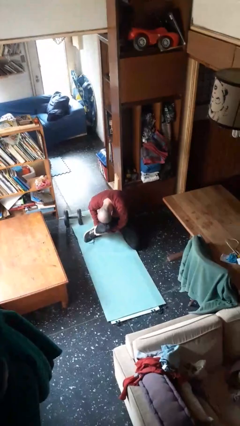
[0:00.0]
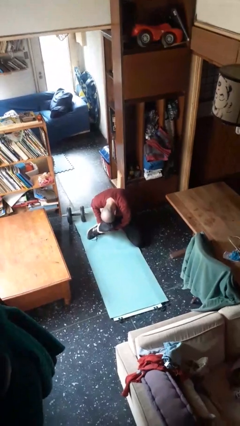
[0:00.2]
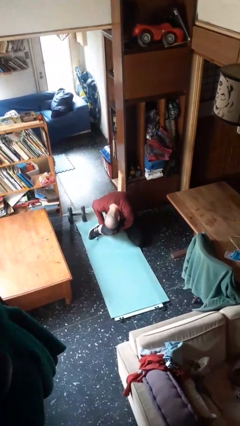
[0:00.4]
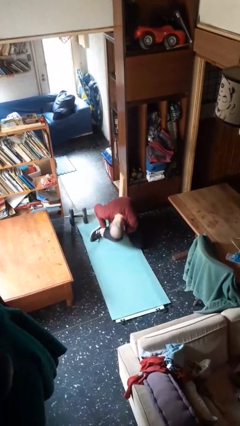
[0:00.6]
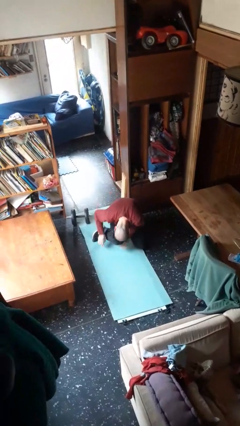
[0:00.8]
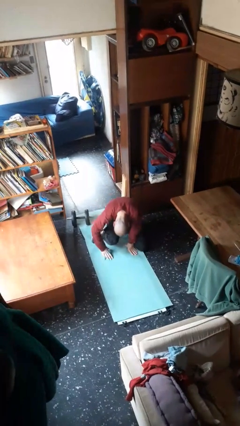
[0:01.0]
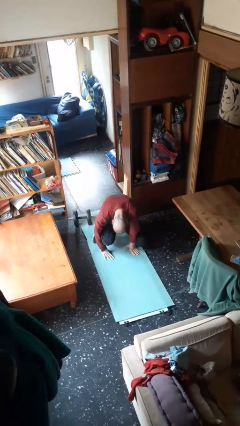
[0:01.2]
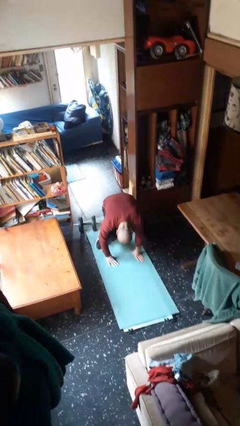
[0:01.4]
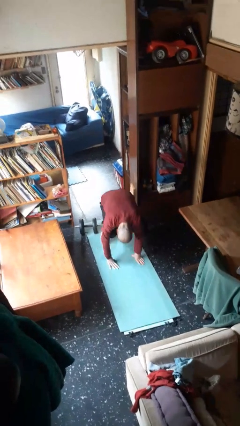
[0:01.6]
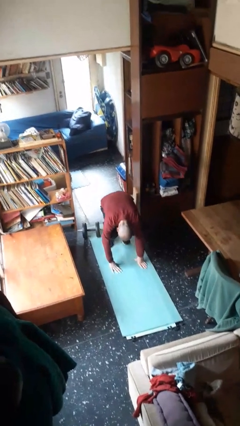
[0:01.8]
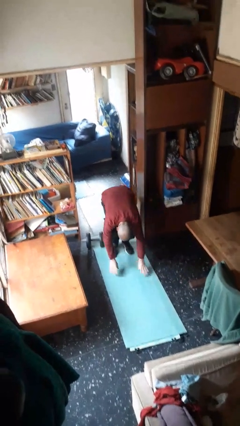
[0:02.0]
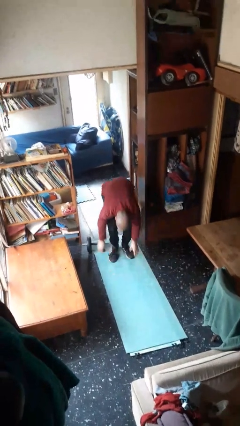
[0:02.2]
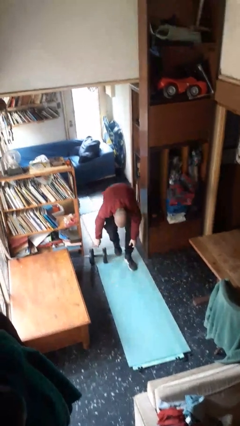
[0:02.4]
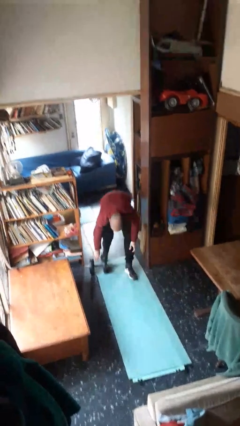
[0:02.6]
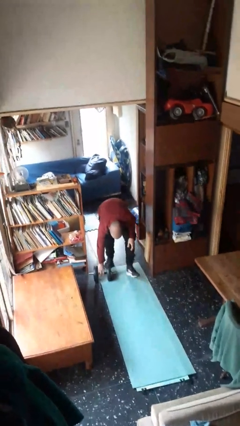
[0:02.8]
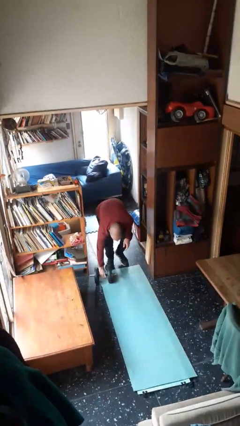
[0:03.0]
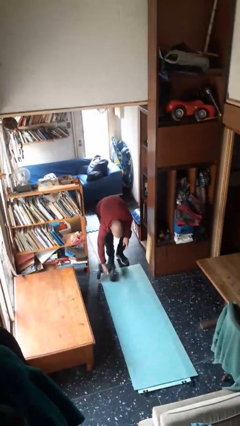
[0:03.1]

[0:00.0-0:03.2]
person stands up from floor

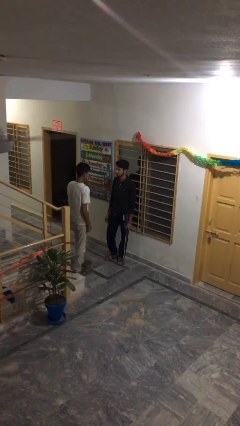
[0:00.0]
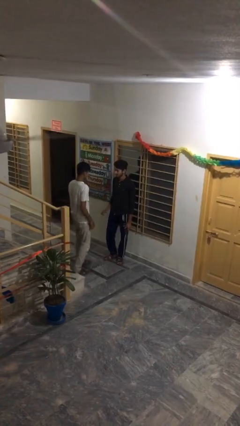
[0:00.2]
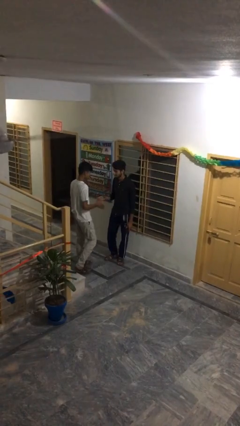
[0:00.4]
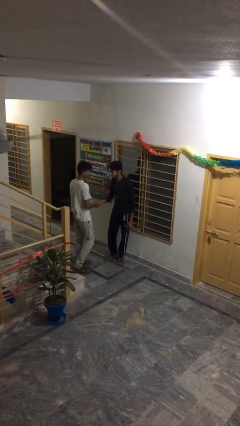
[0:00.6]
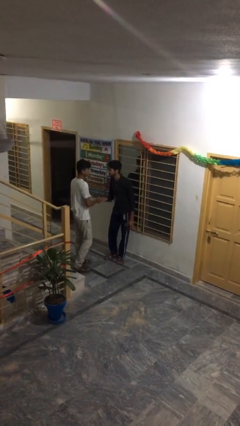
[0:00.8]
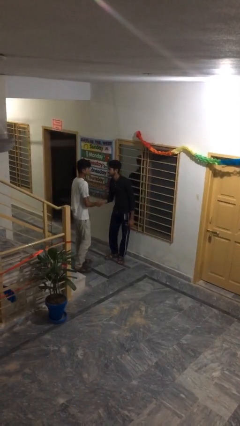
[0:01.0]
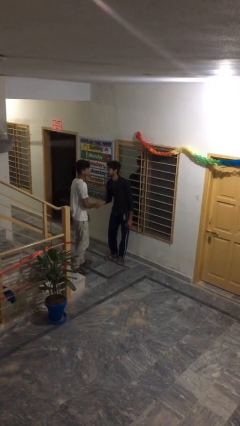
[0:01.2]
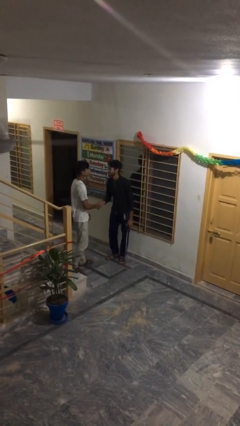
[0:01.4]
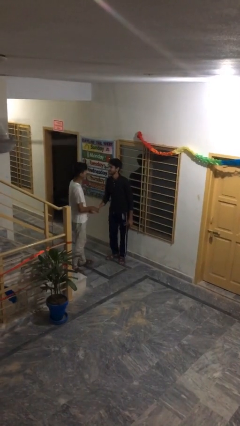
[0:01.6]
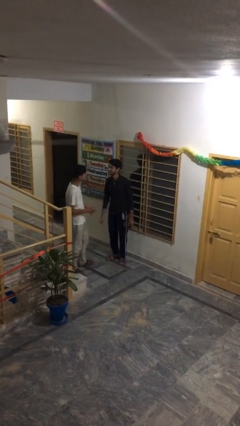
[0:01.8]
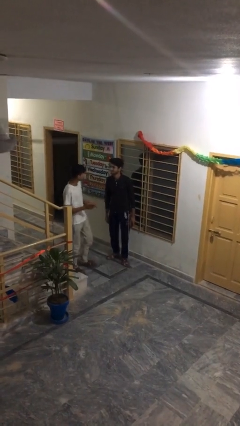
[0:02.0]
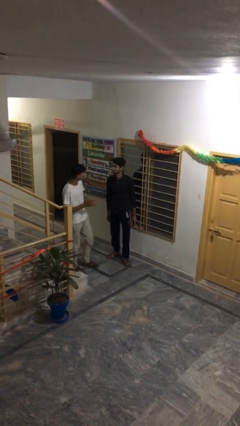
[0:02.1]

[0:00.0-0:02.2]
person shakes hand

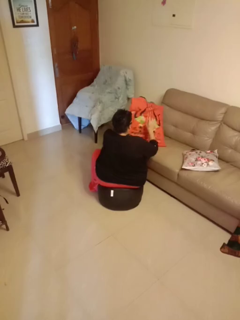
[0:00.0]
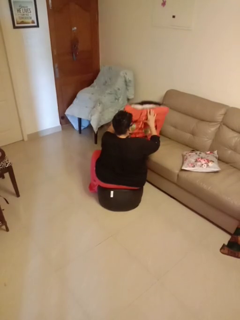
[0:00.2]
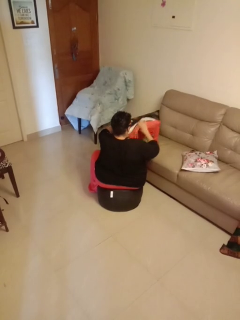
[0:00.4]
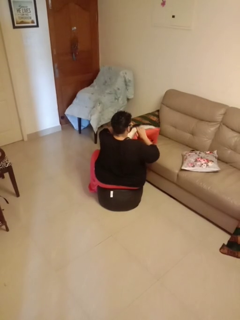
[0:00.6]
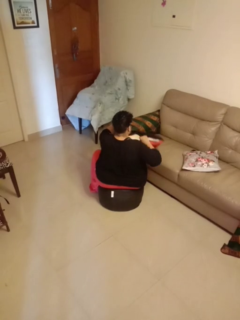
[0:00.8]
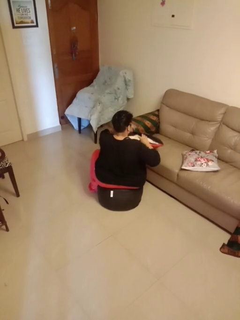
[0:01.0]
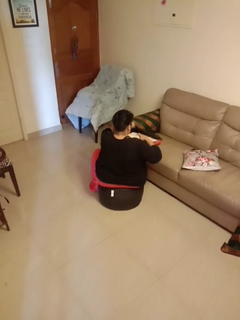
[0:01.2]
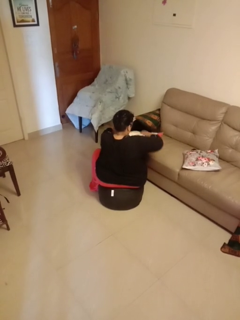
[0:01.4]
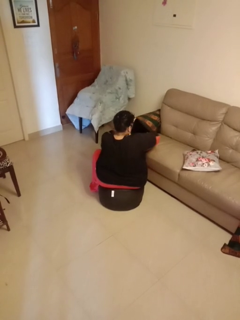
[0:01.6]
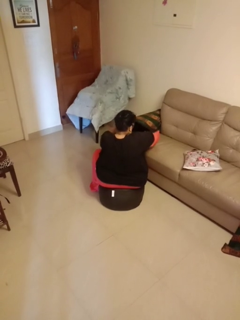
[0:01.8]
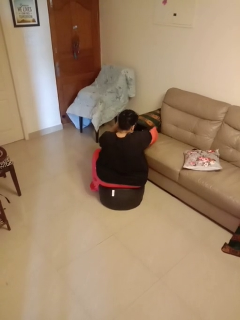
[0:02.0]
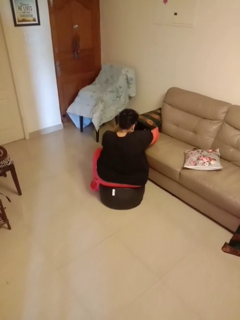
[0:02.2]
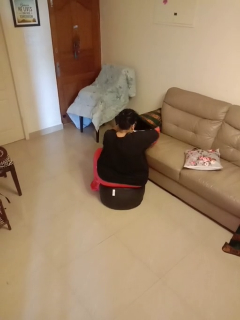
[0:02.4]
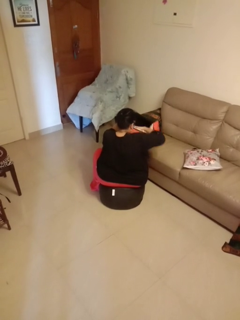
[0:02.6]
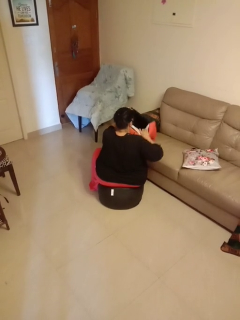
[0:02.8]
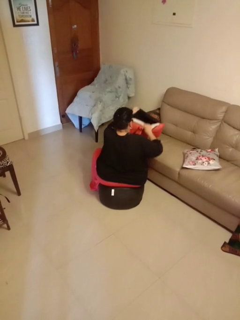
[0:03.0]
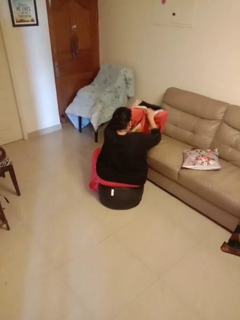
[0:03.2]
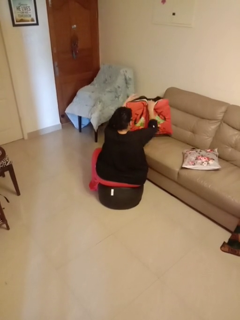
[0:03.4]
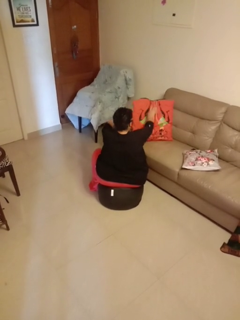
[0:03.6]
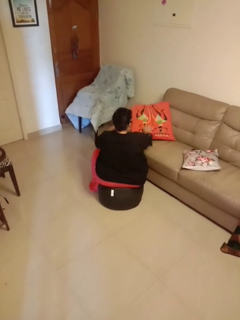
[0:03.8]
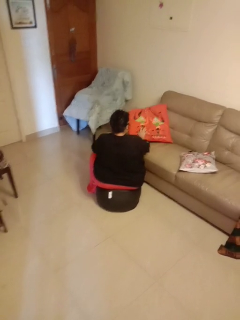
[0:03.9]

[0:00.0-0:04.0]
person searches in couch

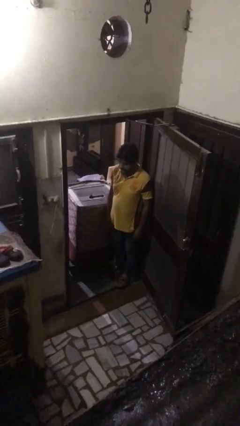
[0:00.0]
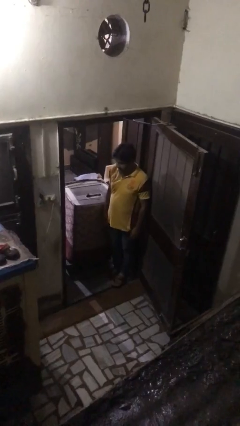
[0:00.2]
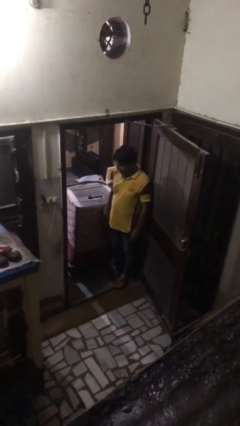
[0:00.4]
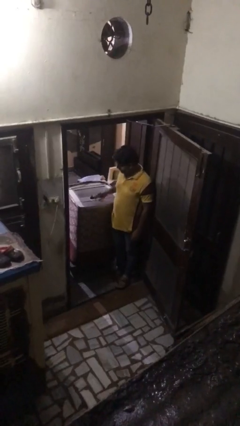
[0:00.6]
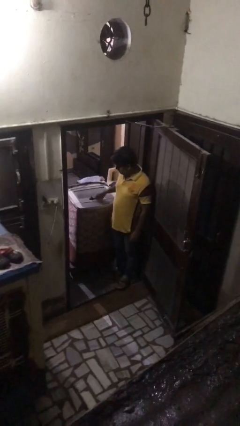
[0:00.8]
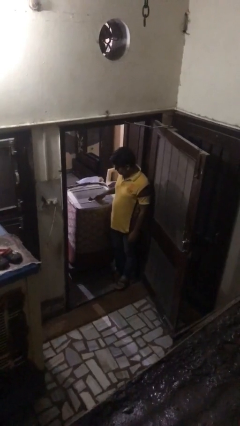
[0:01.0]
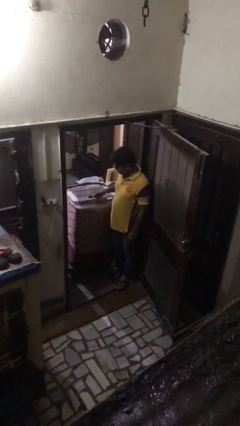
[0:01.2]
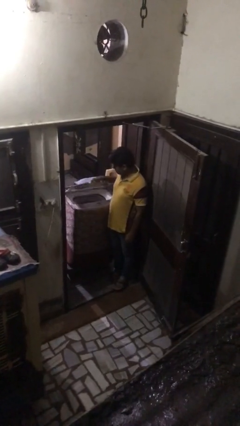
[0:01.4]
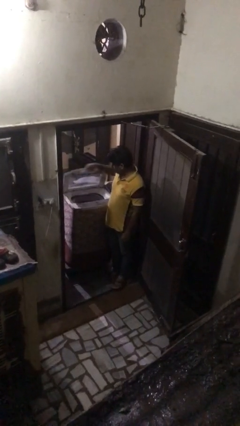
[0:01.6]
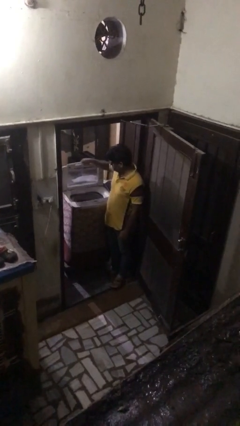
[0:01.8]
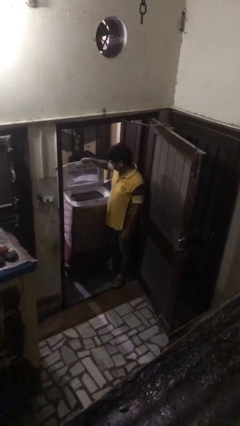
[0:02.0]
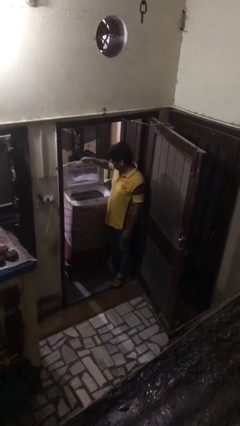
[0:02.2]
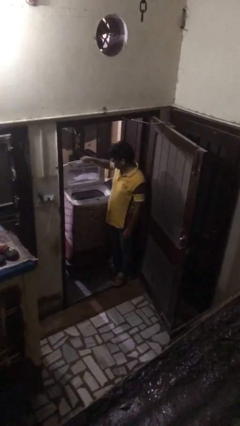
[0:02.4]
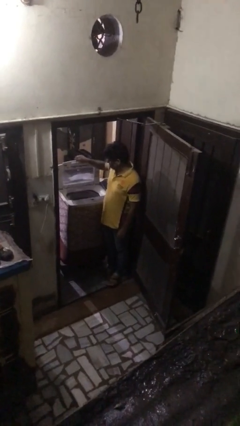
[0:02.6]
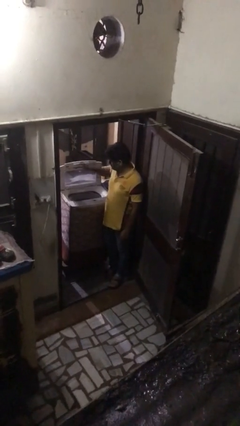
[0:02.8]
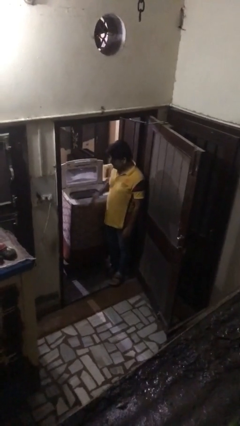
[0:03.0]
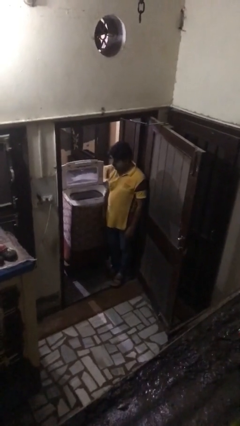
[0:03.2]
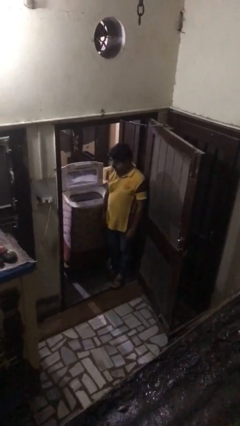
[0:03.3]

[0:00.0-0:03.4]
person opens clothes washer

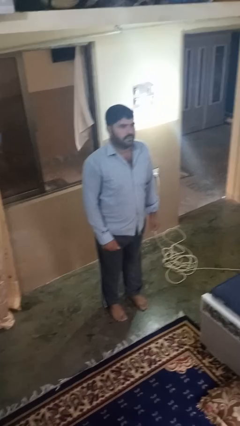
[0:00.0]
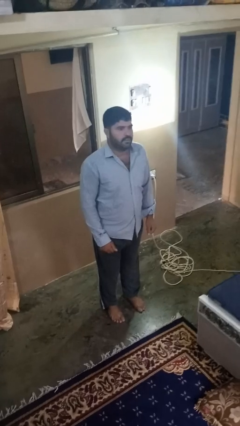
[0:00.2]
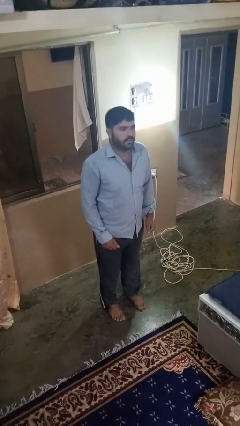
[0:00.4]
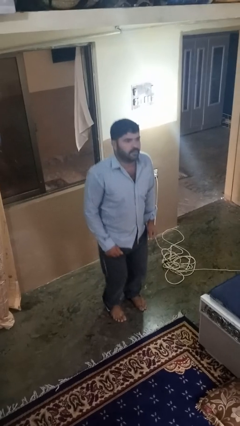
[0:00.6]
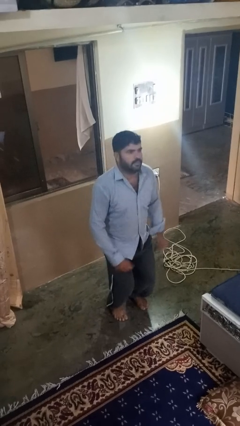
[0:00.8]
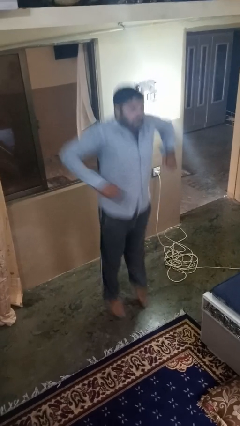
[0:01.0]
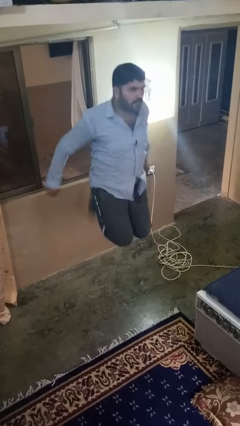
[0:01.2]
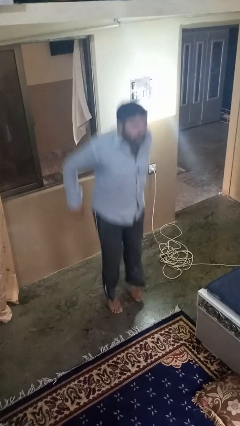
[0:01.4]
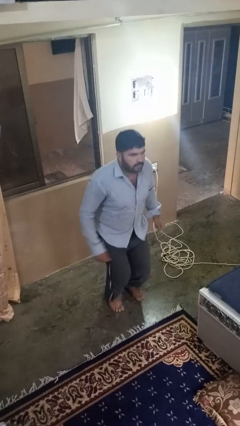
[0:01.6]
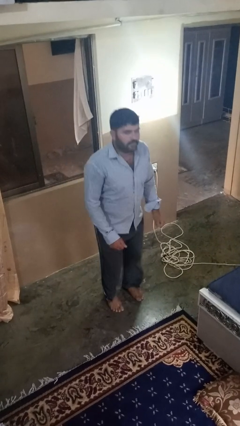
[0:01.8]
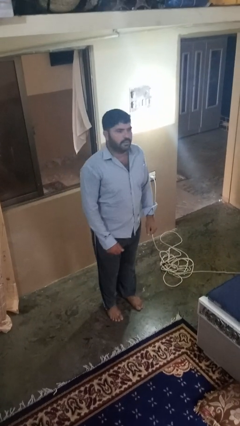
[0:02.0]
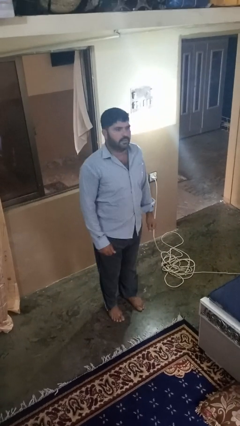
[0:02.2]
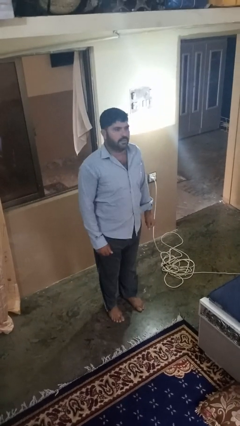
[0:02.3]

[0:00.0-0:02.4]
person jumps

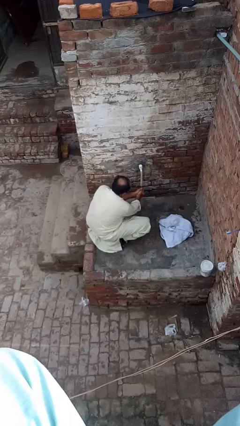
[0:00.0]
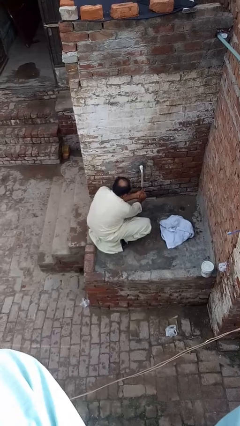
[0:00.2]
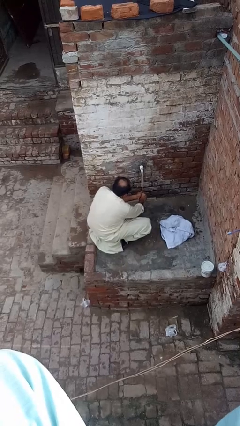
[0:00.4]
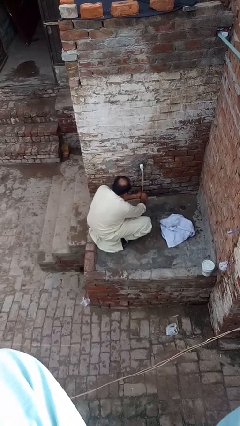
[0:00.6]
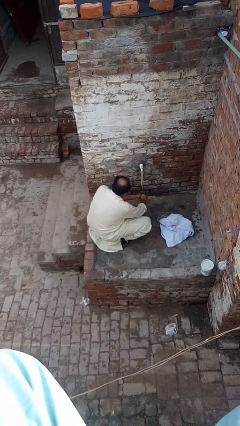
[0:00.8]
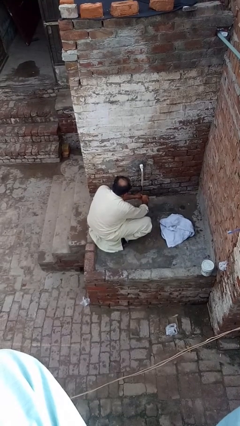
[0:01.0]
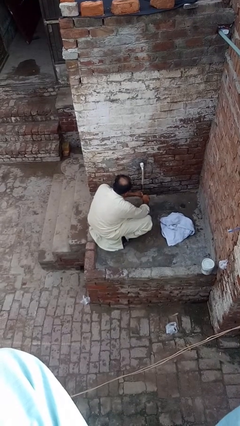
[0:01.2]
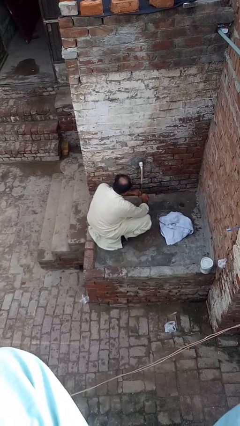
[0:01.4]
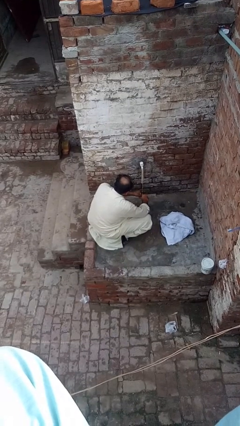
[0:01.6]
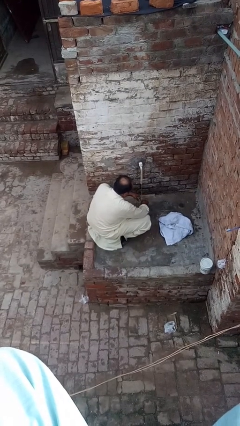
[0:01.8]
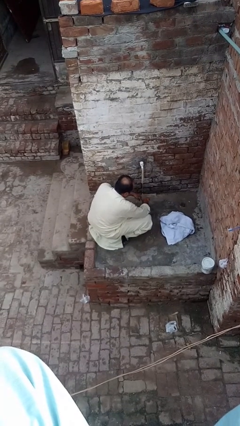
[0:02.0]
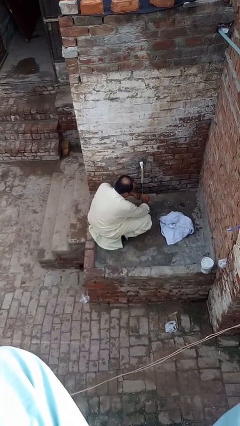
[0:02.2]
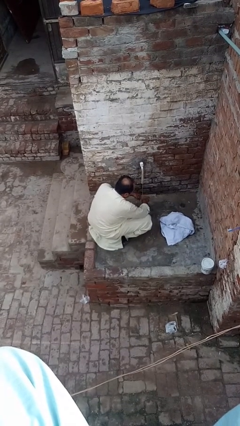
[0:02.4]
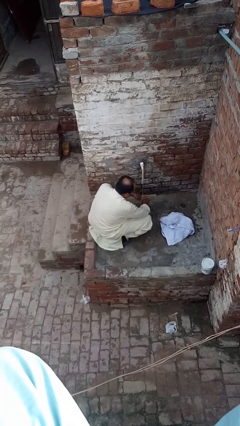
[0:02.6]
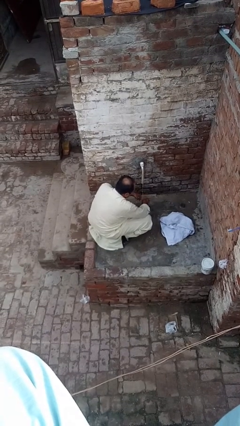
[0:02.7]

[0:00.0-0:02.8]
person washes hands

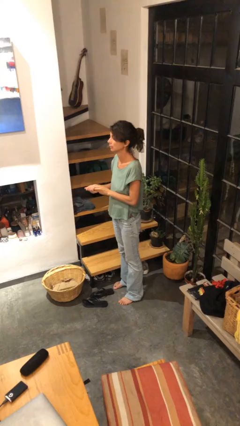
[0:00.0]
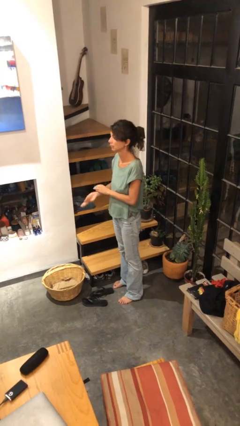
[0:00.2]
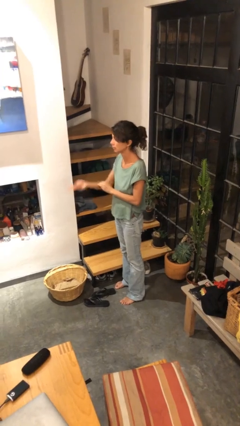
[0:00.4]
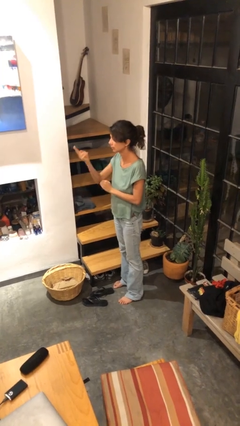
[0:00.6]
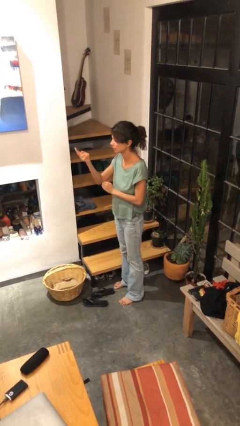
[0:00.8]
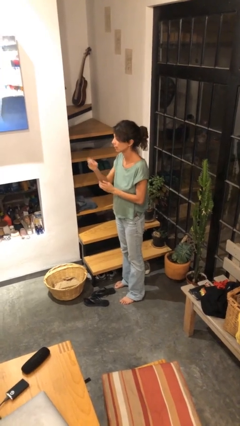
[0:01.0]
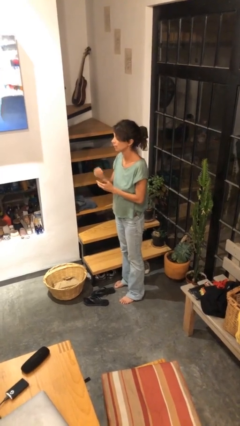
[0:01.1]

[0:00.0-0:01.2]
person gestures swipe up
